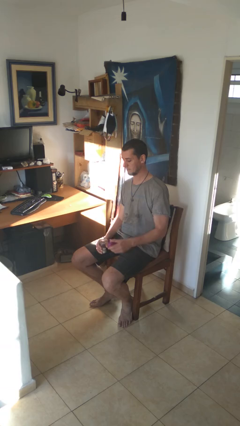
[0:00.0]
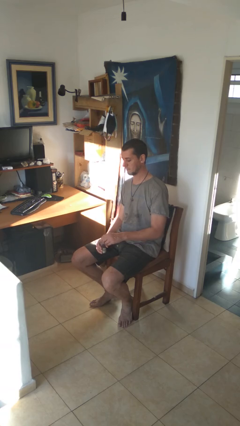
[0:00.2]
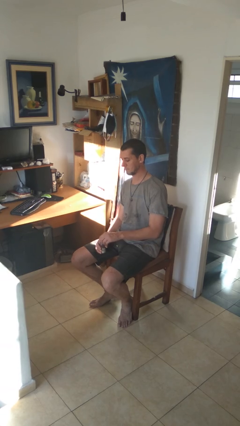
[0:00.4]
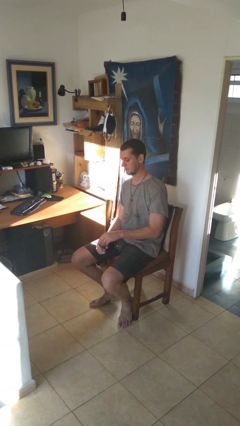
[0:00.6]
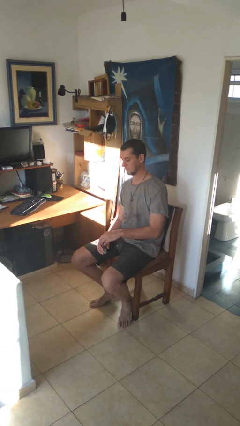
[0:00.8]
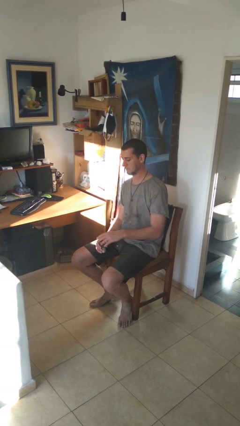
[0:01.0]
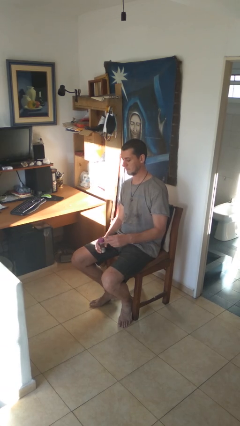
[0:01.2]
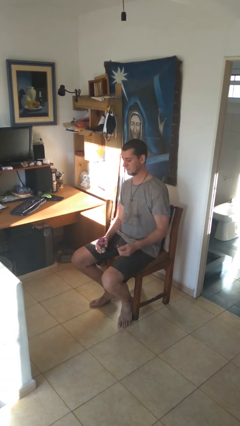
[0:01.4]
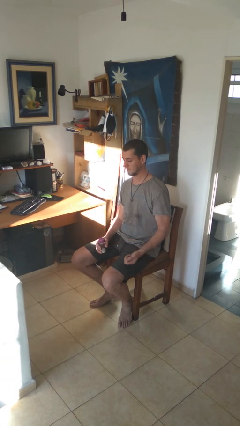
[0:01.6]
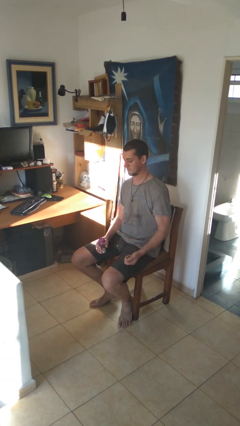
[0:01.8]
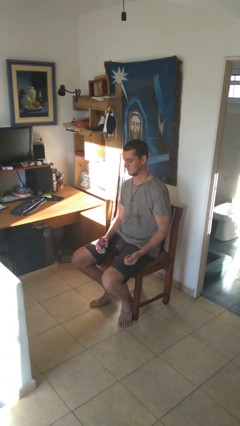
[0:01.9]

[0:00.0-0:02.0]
person closes jar

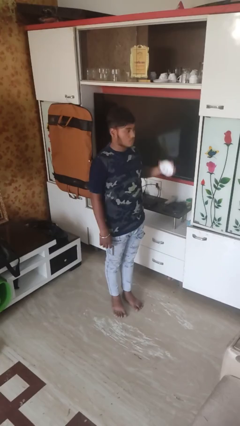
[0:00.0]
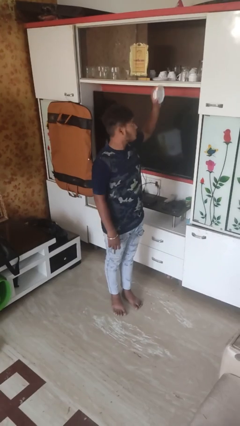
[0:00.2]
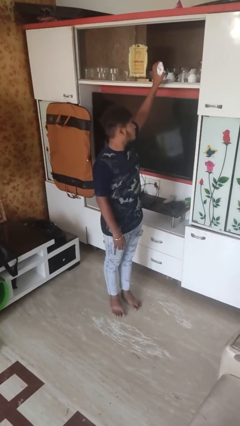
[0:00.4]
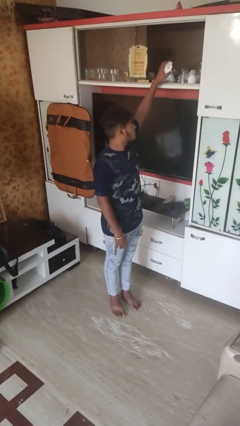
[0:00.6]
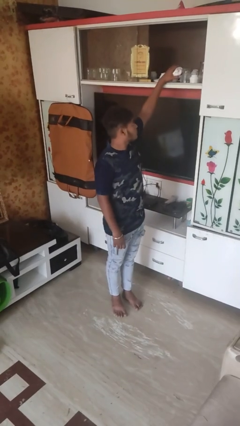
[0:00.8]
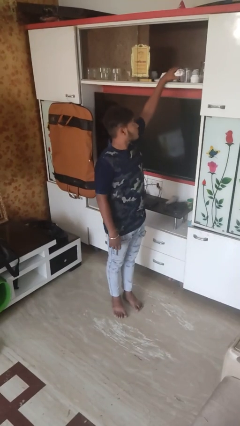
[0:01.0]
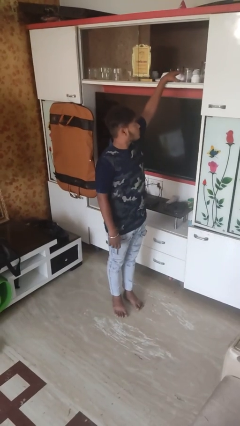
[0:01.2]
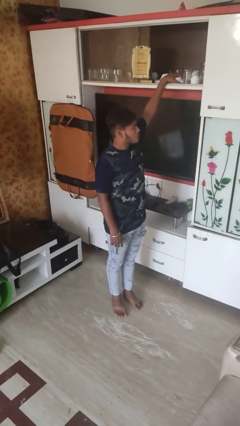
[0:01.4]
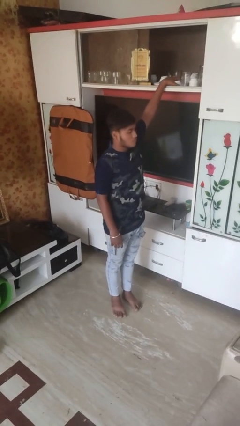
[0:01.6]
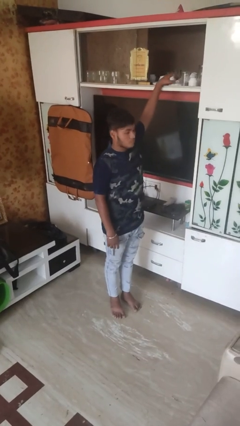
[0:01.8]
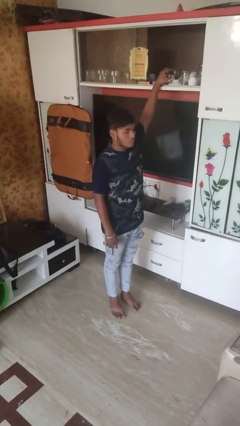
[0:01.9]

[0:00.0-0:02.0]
person puts object in cabinet

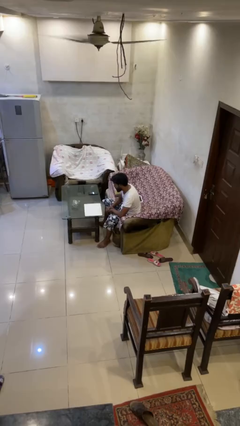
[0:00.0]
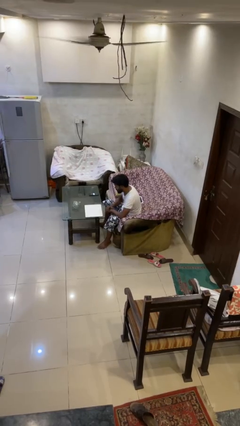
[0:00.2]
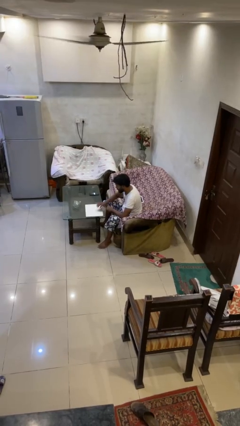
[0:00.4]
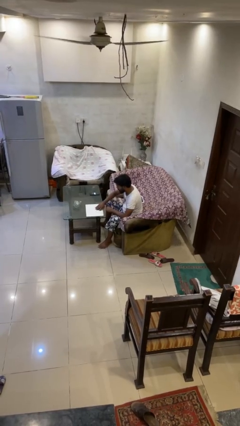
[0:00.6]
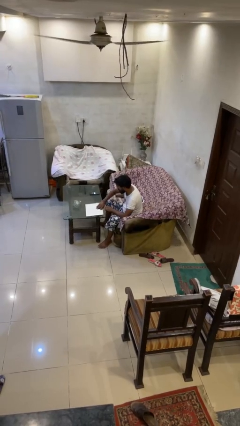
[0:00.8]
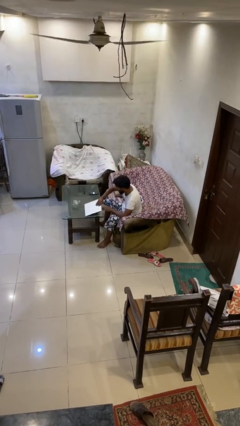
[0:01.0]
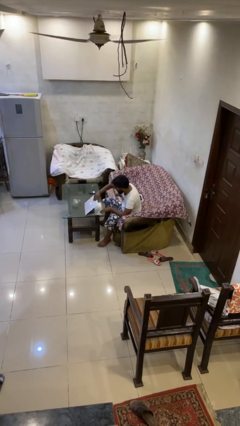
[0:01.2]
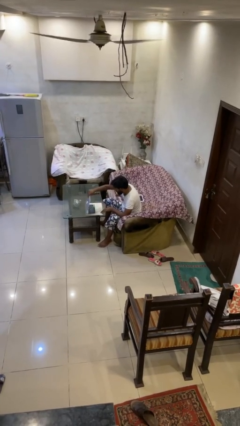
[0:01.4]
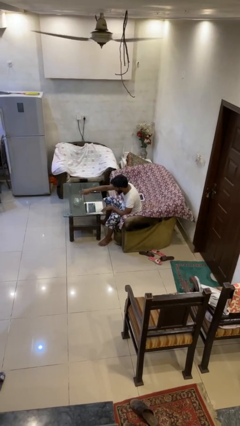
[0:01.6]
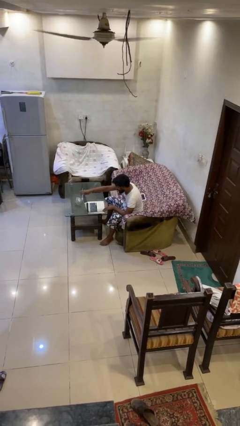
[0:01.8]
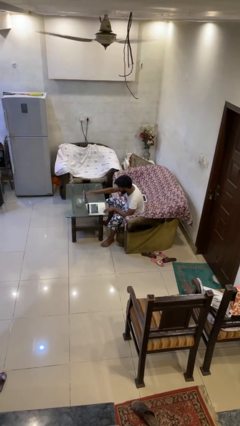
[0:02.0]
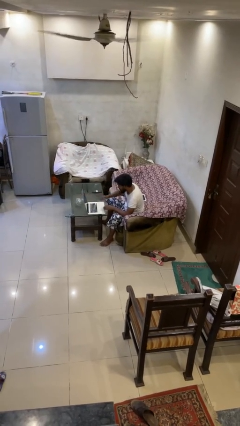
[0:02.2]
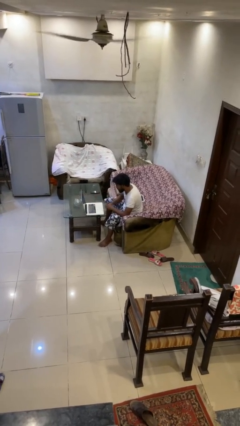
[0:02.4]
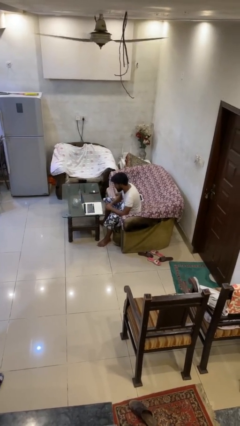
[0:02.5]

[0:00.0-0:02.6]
person opens laptop

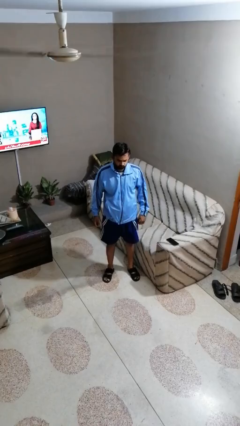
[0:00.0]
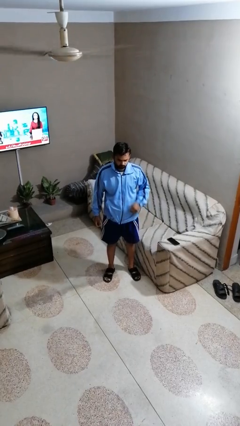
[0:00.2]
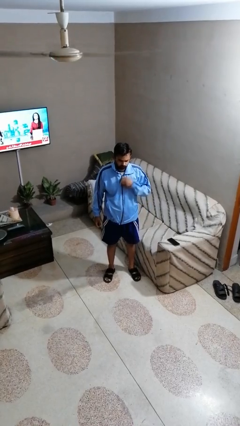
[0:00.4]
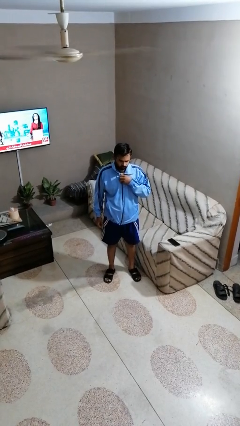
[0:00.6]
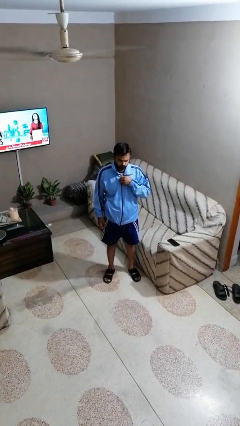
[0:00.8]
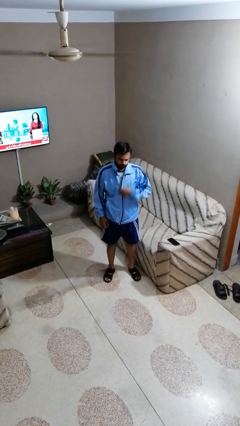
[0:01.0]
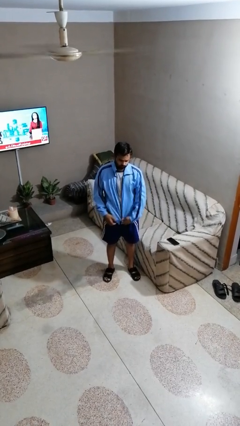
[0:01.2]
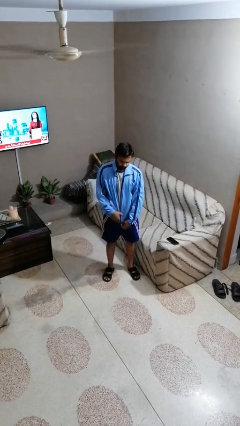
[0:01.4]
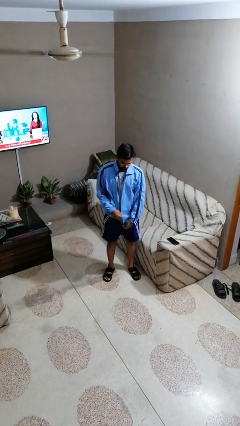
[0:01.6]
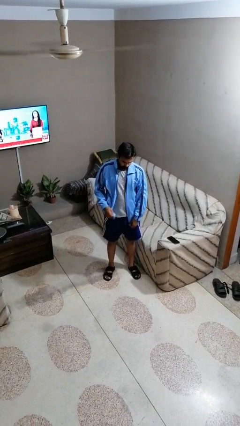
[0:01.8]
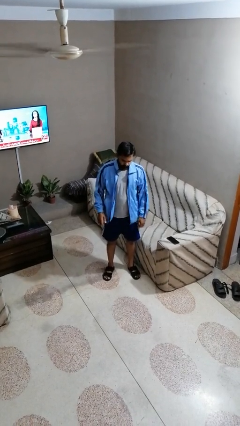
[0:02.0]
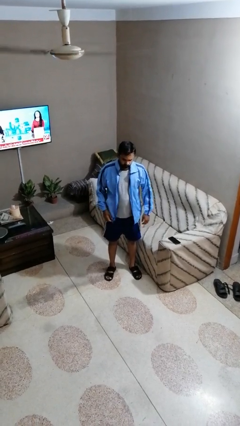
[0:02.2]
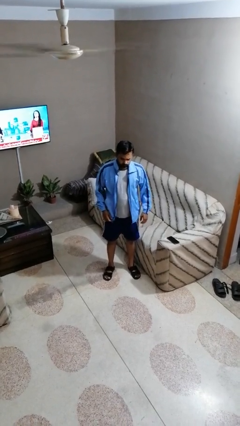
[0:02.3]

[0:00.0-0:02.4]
person unzips jacket

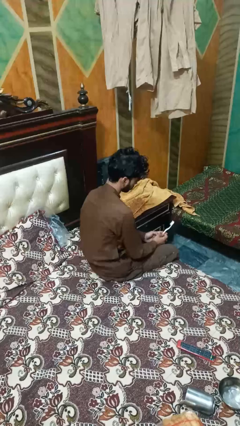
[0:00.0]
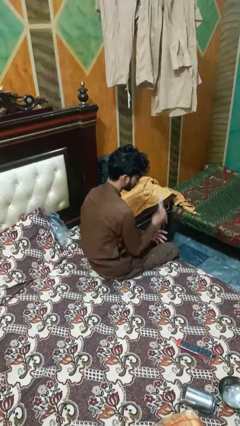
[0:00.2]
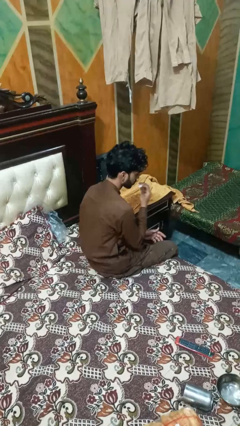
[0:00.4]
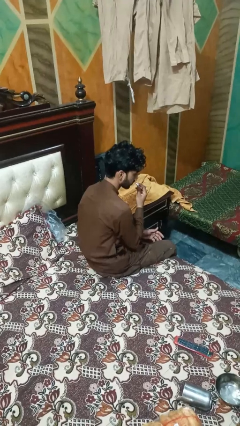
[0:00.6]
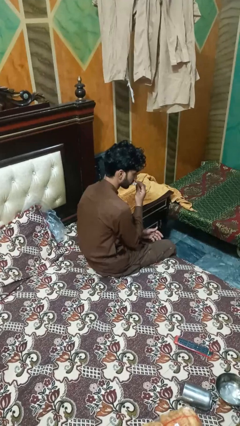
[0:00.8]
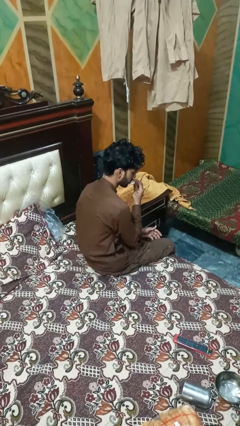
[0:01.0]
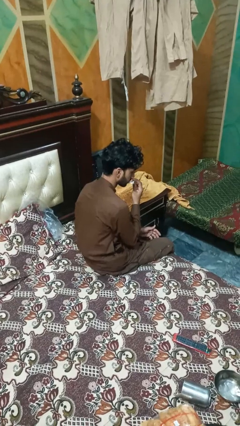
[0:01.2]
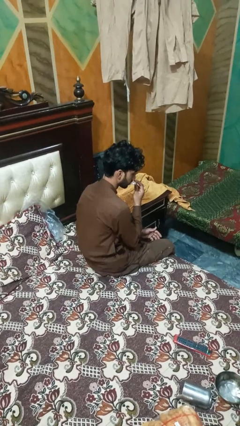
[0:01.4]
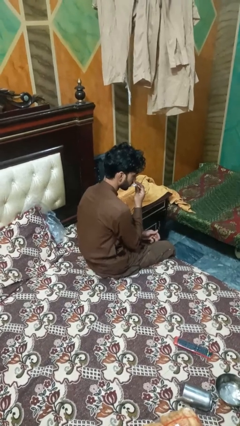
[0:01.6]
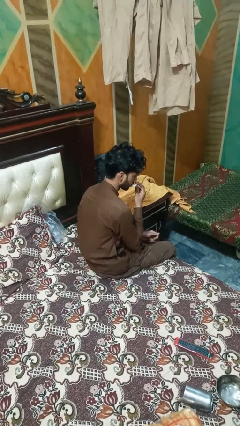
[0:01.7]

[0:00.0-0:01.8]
person brushes teeth

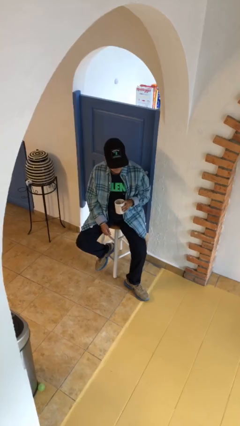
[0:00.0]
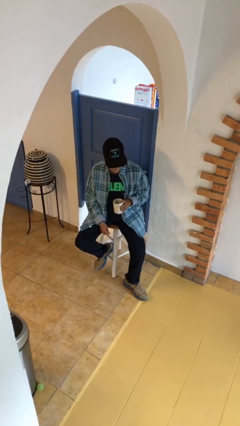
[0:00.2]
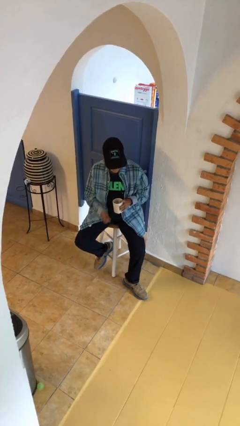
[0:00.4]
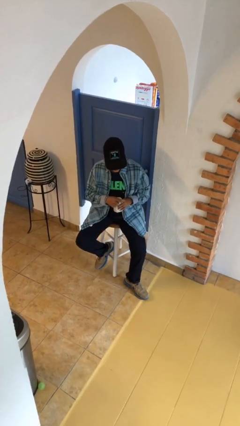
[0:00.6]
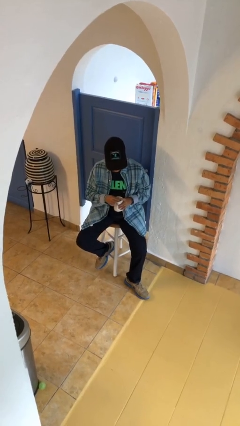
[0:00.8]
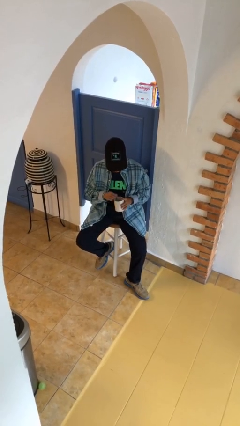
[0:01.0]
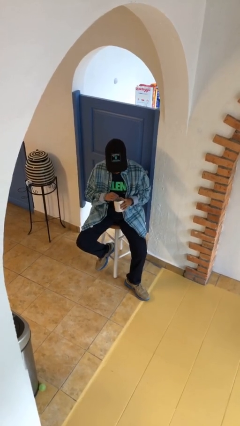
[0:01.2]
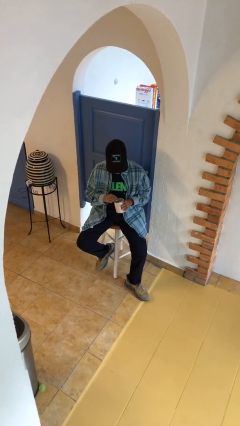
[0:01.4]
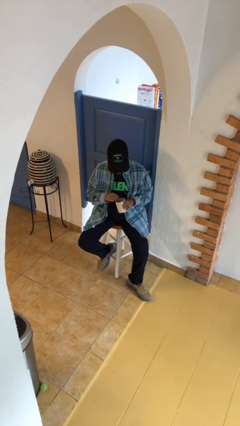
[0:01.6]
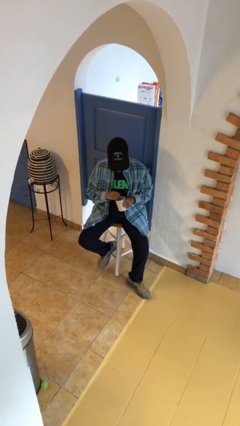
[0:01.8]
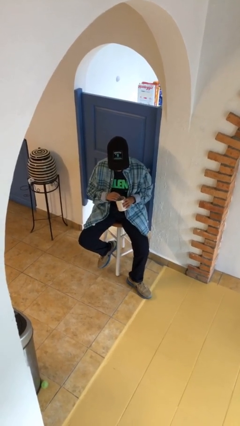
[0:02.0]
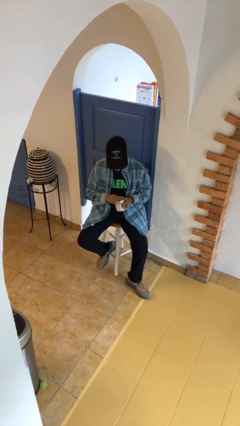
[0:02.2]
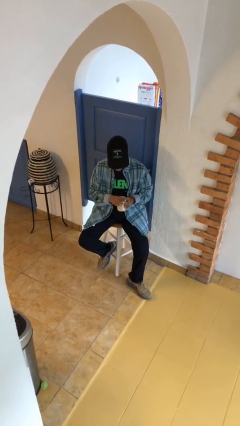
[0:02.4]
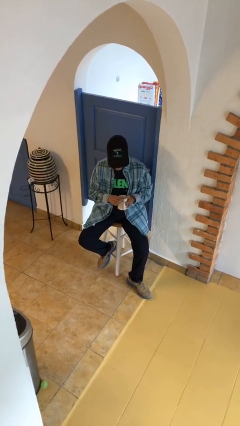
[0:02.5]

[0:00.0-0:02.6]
person stirs mug

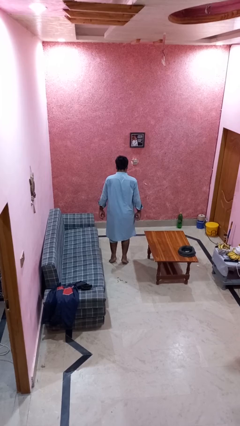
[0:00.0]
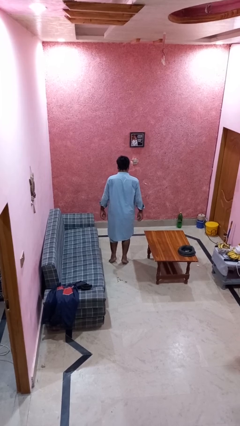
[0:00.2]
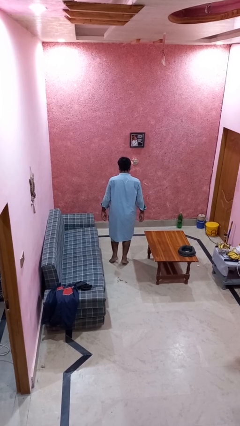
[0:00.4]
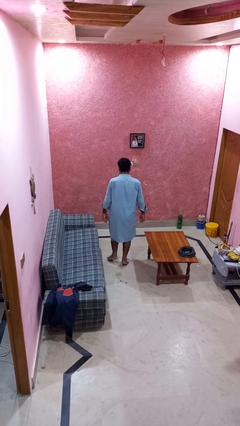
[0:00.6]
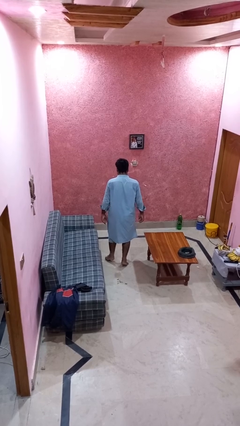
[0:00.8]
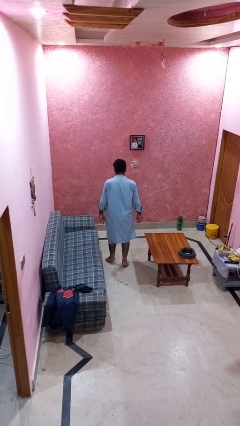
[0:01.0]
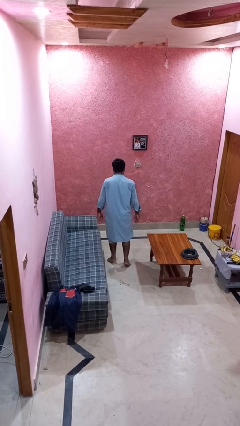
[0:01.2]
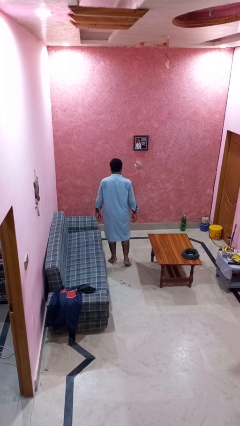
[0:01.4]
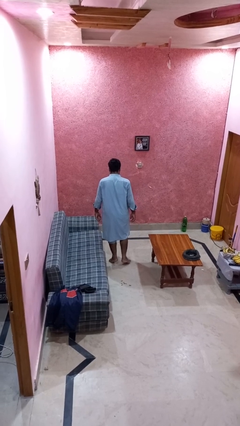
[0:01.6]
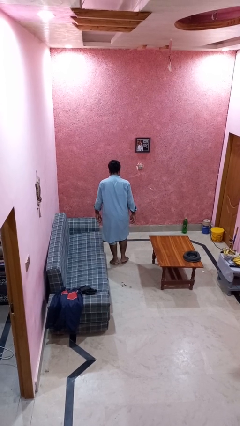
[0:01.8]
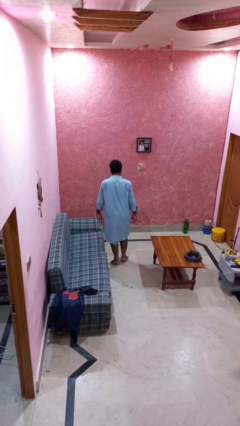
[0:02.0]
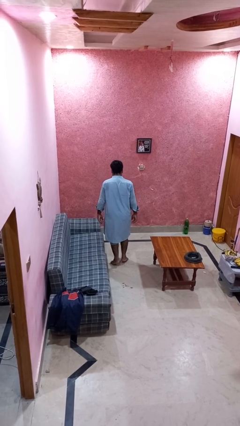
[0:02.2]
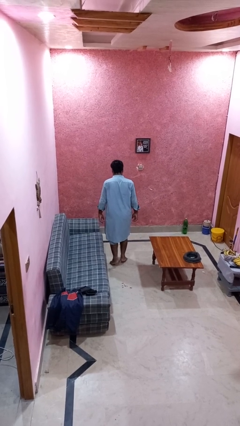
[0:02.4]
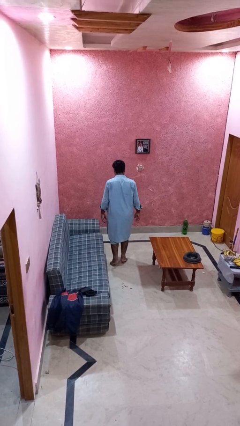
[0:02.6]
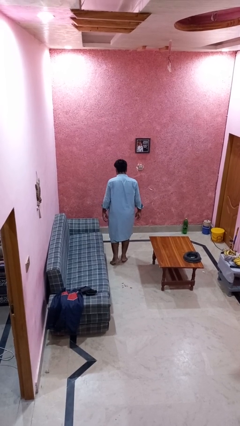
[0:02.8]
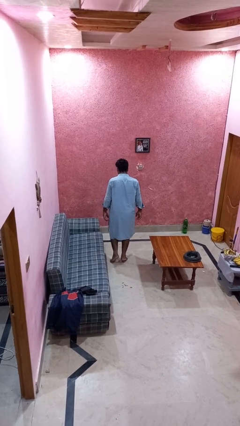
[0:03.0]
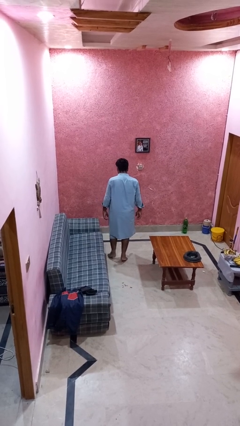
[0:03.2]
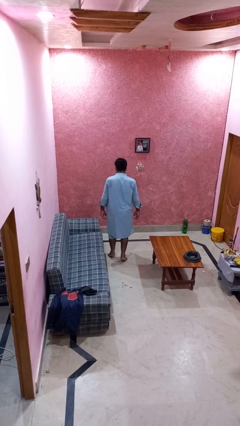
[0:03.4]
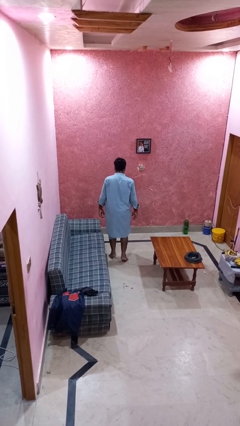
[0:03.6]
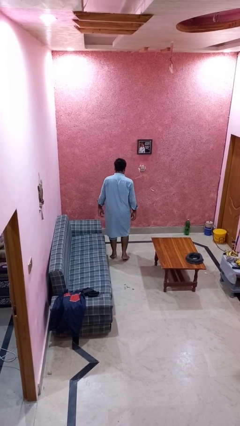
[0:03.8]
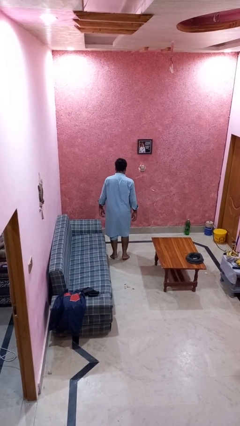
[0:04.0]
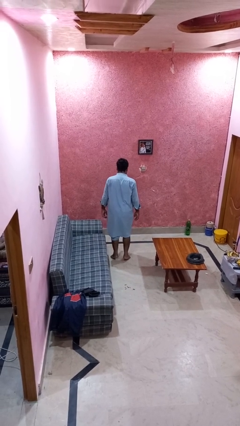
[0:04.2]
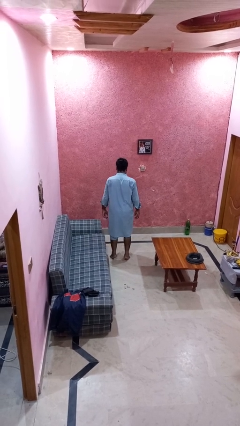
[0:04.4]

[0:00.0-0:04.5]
person walks tiptoe
